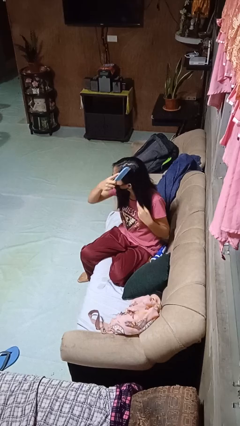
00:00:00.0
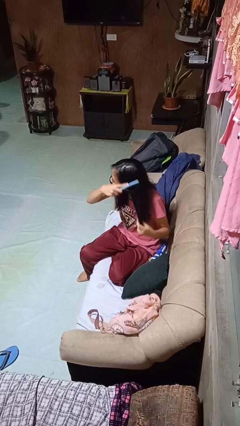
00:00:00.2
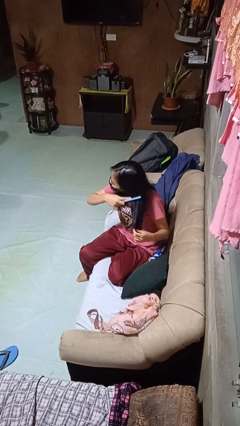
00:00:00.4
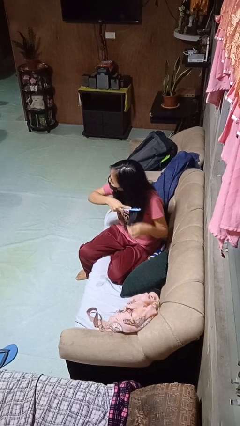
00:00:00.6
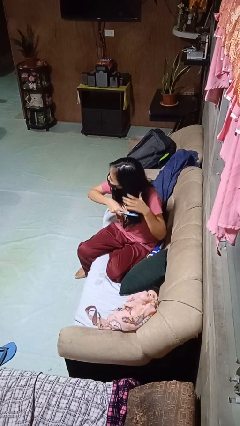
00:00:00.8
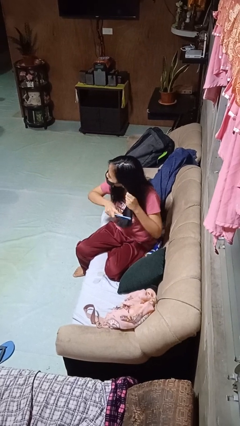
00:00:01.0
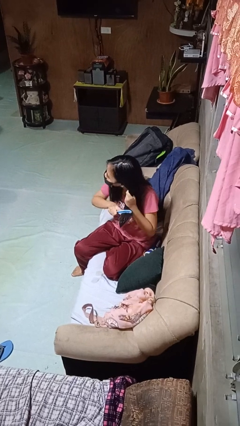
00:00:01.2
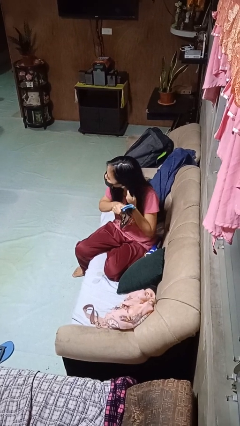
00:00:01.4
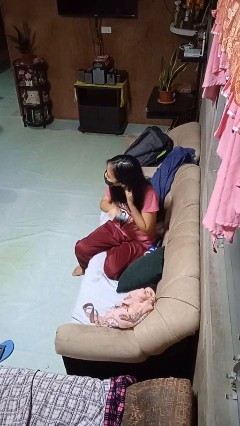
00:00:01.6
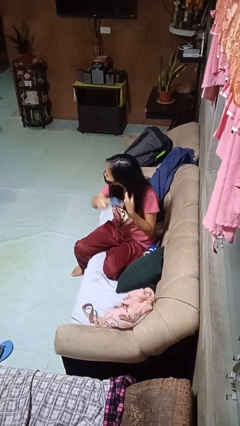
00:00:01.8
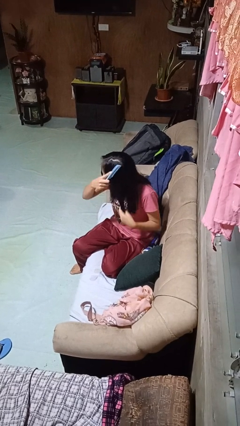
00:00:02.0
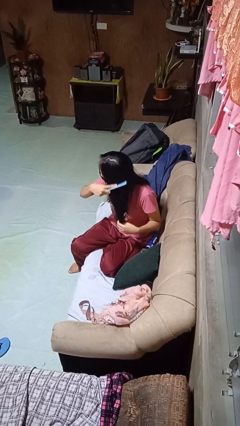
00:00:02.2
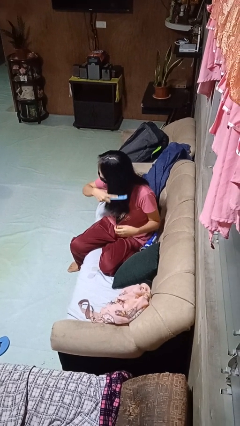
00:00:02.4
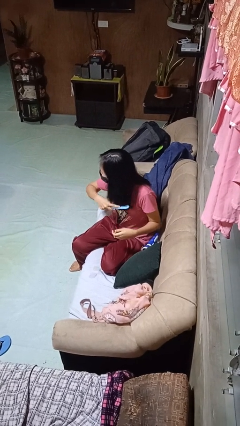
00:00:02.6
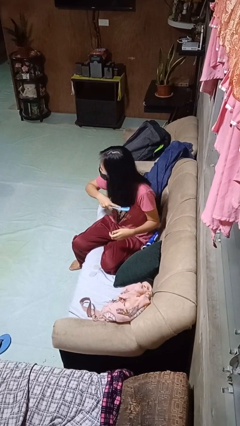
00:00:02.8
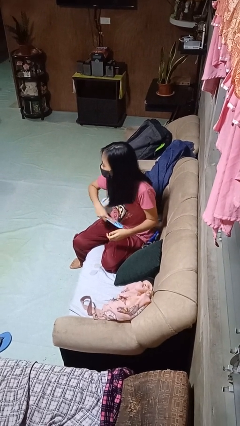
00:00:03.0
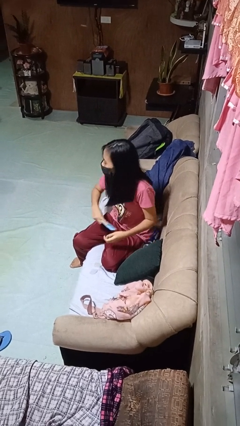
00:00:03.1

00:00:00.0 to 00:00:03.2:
person brushes hair

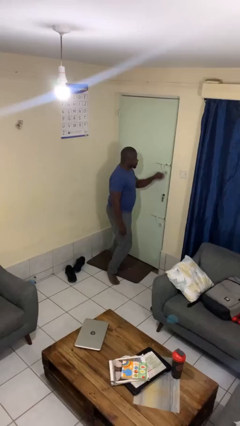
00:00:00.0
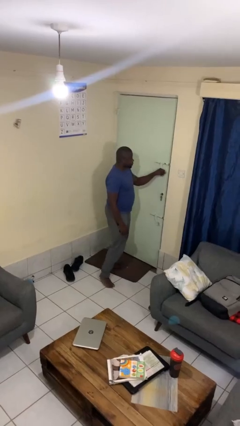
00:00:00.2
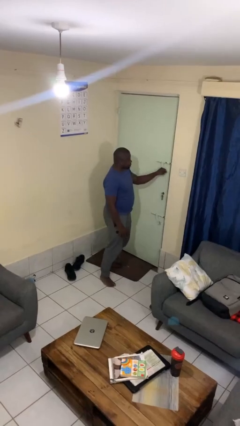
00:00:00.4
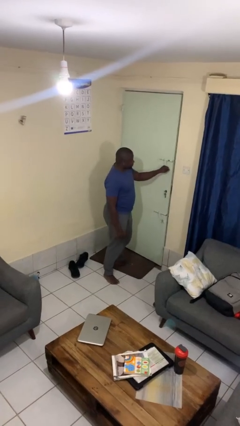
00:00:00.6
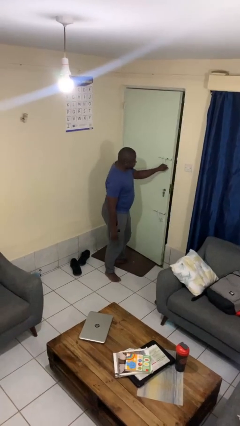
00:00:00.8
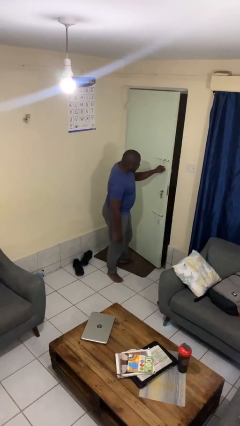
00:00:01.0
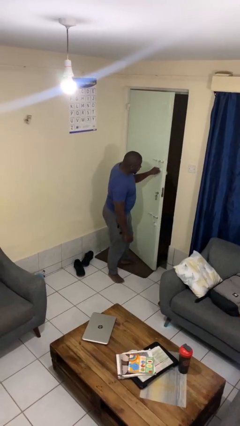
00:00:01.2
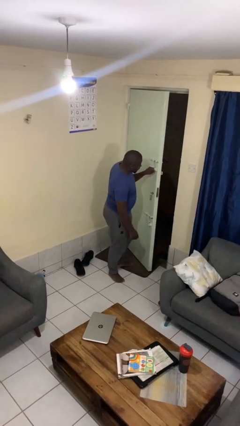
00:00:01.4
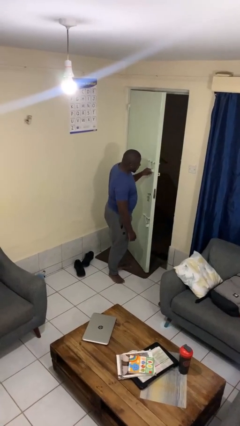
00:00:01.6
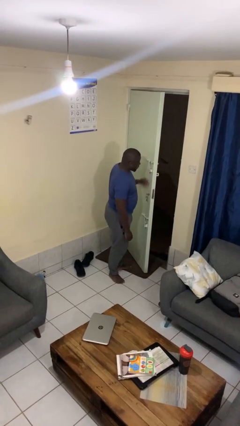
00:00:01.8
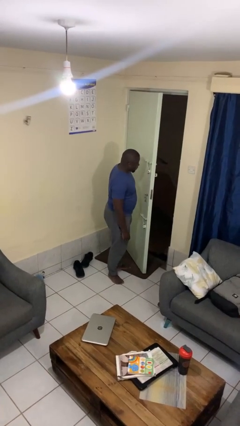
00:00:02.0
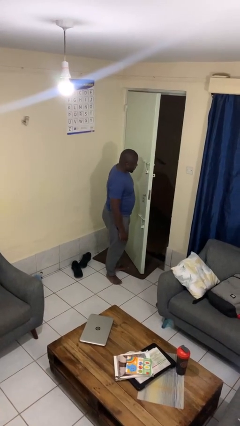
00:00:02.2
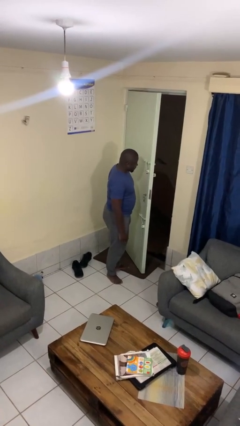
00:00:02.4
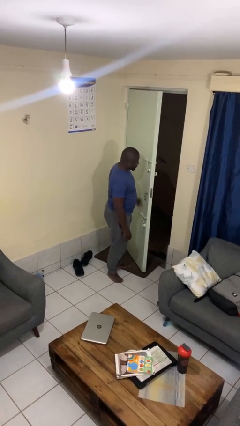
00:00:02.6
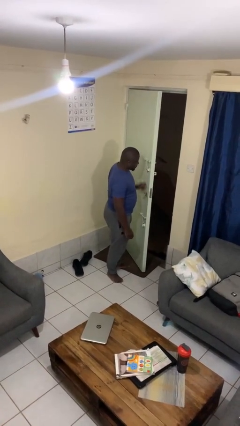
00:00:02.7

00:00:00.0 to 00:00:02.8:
person opens facility door

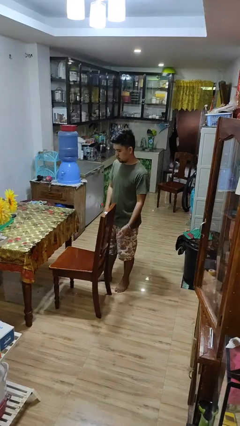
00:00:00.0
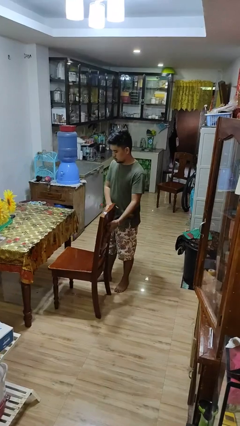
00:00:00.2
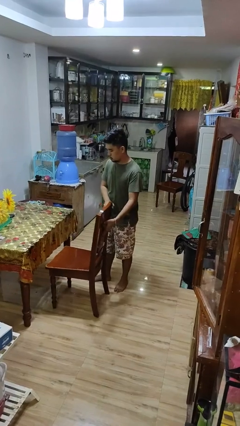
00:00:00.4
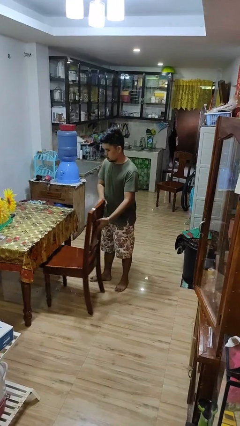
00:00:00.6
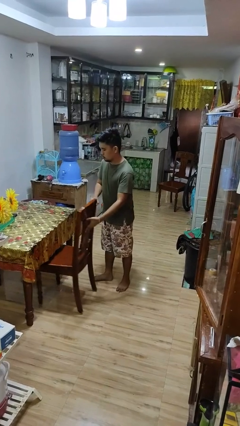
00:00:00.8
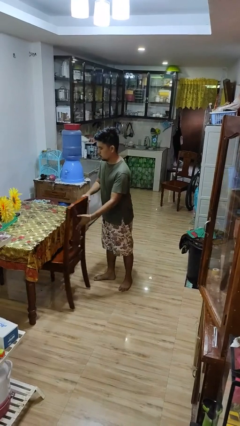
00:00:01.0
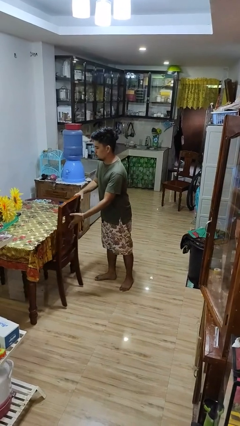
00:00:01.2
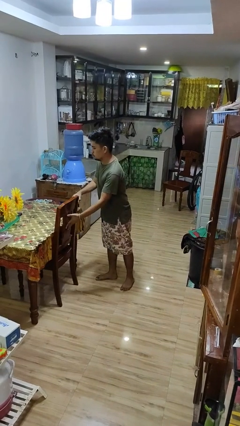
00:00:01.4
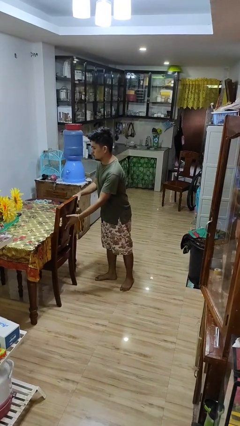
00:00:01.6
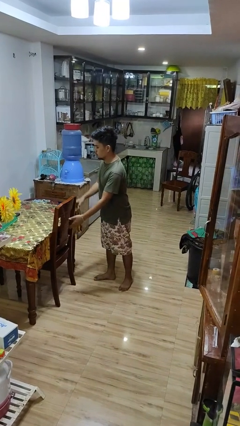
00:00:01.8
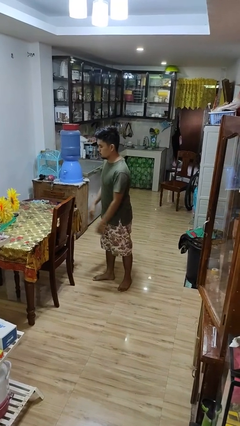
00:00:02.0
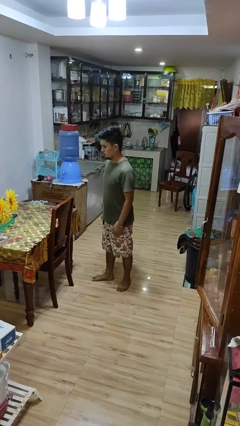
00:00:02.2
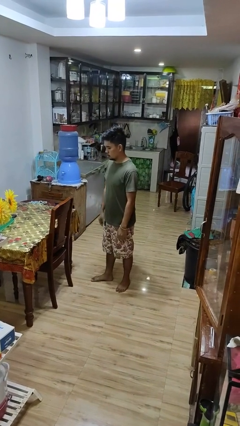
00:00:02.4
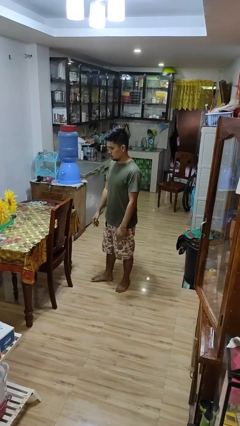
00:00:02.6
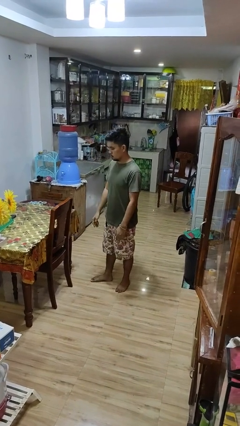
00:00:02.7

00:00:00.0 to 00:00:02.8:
person pushes in chair

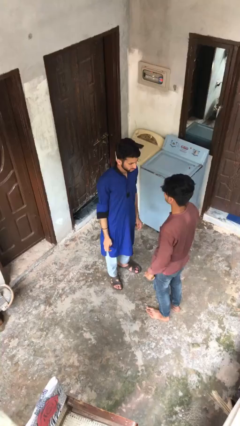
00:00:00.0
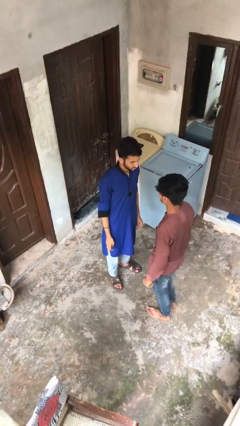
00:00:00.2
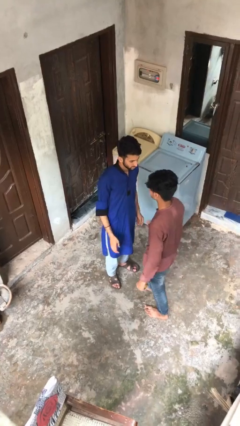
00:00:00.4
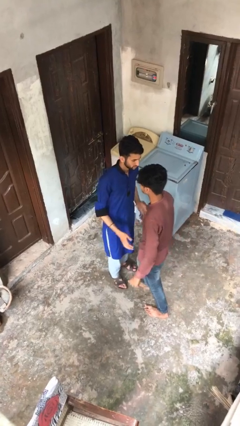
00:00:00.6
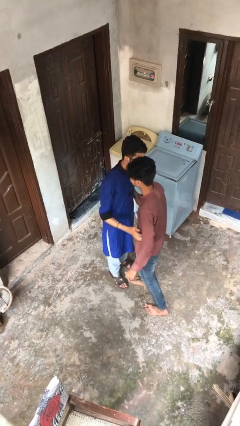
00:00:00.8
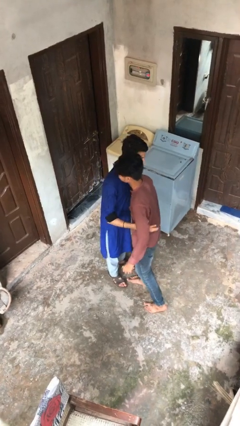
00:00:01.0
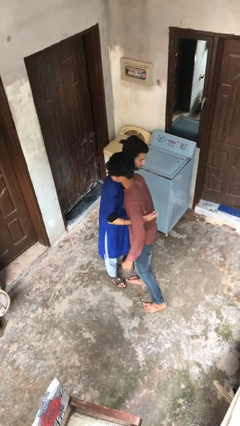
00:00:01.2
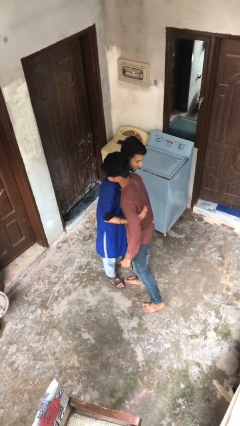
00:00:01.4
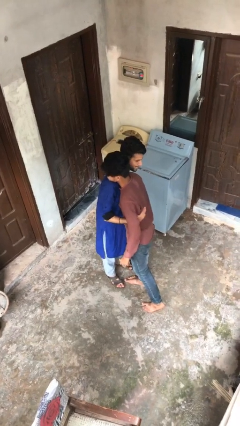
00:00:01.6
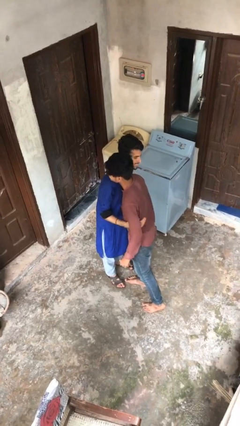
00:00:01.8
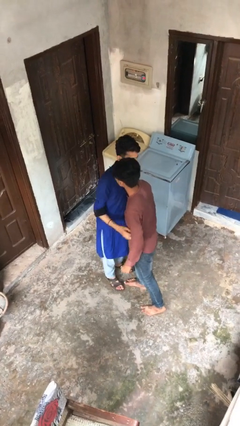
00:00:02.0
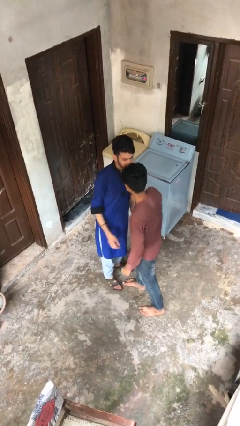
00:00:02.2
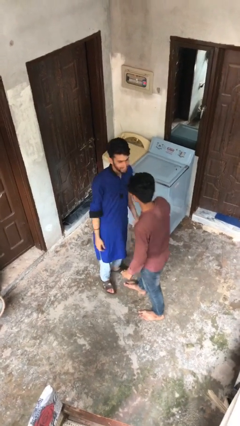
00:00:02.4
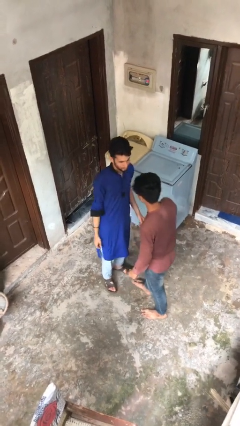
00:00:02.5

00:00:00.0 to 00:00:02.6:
person embraces person

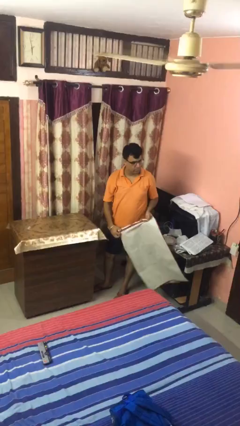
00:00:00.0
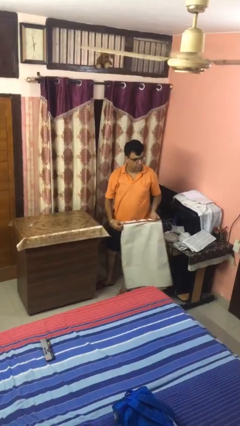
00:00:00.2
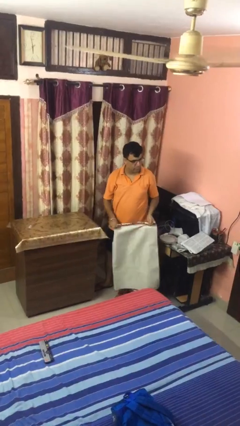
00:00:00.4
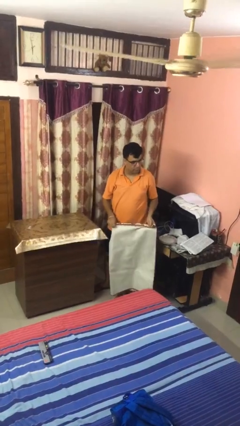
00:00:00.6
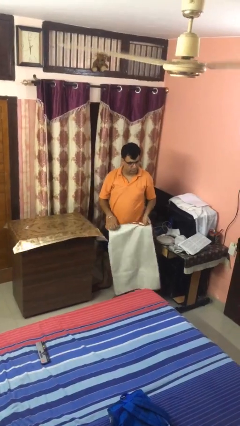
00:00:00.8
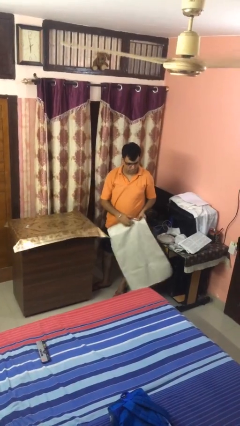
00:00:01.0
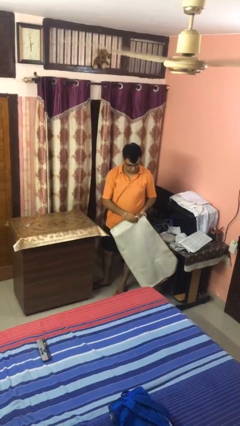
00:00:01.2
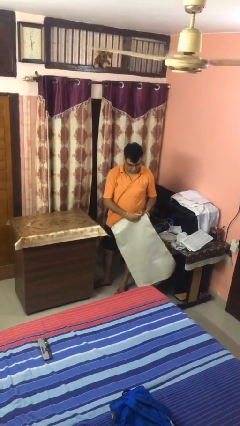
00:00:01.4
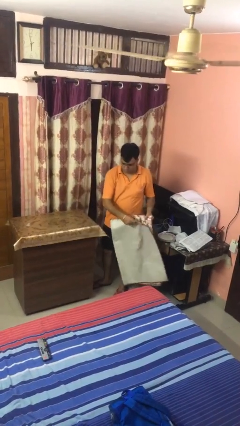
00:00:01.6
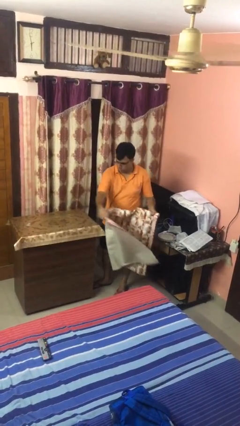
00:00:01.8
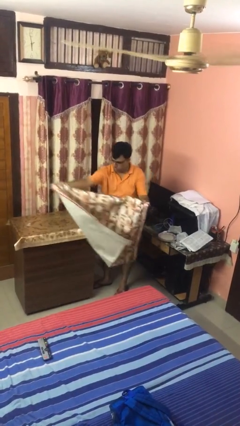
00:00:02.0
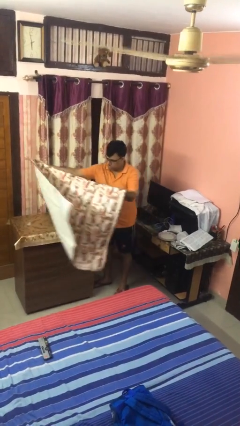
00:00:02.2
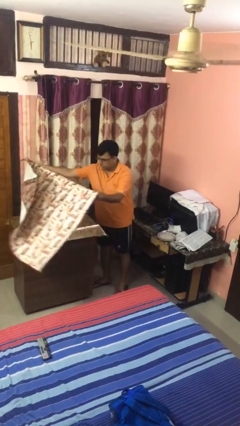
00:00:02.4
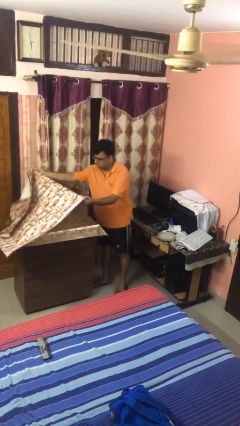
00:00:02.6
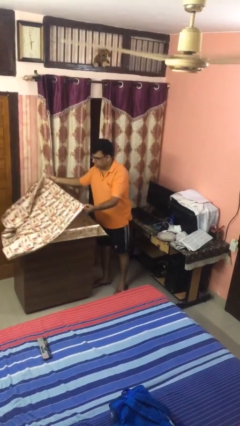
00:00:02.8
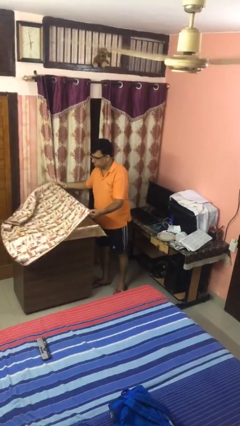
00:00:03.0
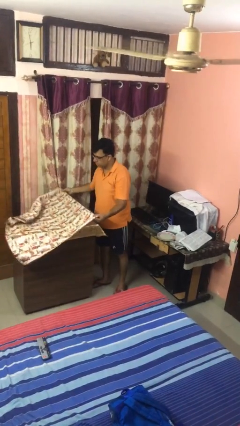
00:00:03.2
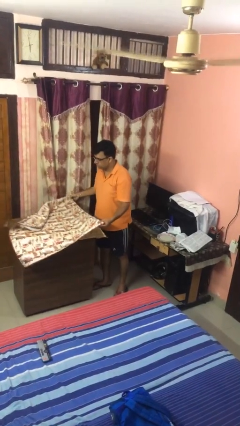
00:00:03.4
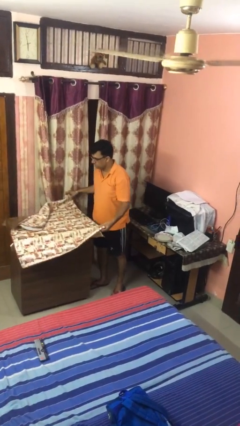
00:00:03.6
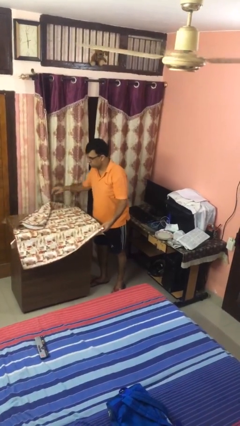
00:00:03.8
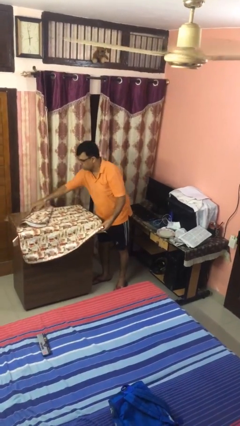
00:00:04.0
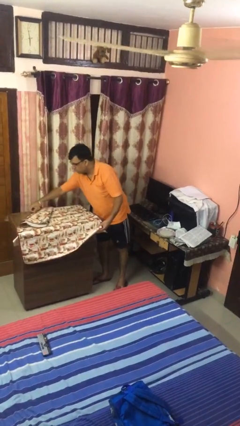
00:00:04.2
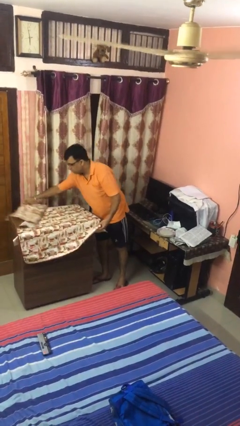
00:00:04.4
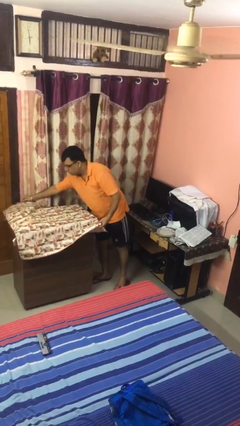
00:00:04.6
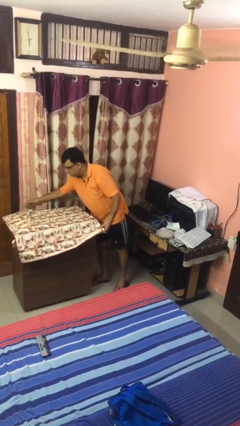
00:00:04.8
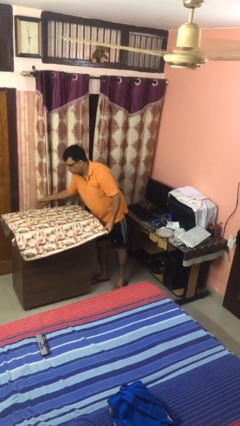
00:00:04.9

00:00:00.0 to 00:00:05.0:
person spreads tablecloth

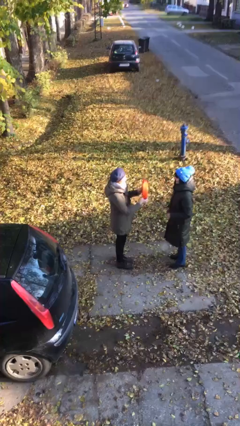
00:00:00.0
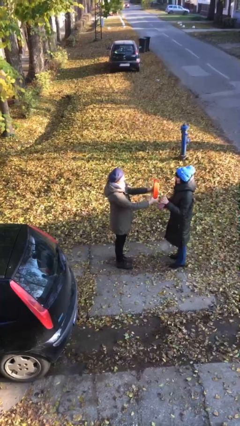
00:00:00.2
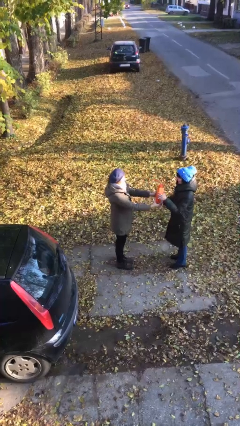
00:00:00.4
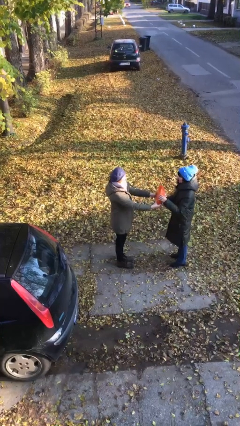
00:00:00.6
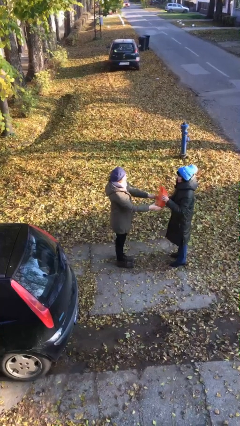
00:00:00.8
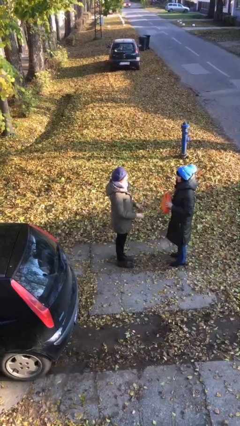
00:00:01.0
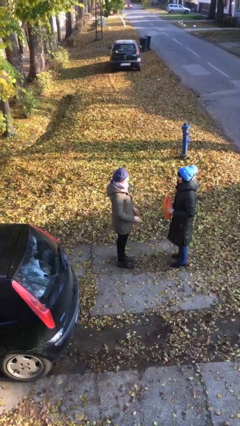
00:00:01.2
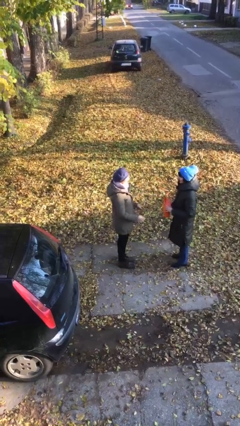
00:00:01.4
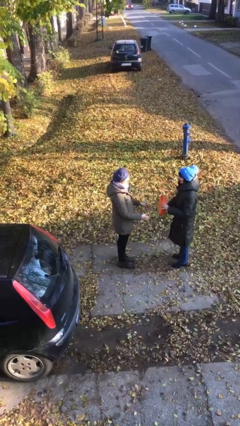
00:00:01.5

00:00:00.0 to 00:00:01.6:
person transfers object to person
